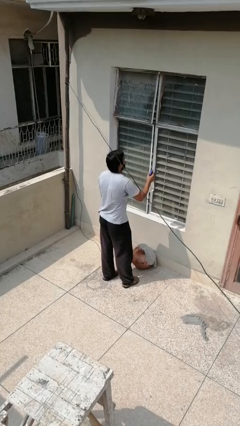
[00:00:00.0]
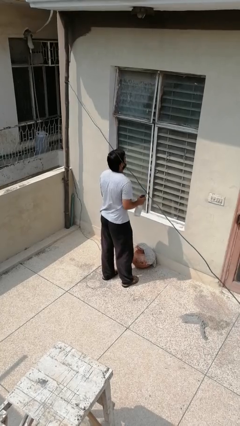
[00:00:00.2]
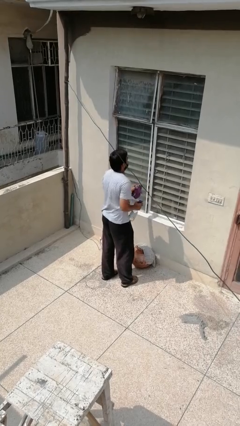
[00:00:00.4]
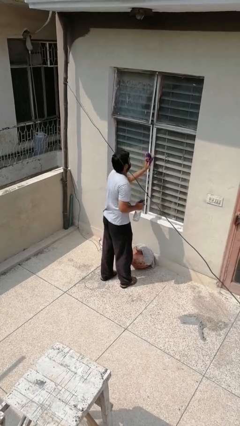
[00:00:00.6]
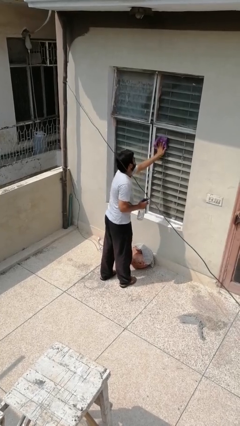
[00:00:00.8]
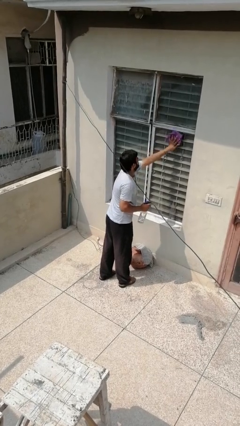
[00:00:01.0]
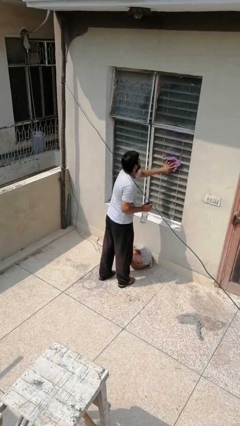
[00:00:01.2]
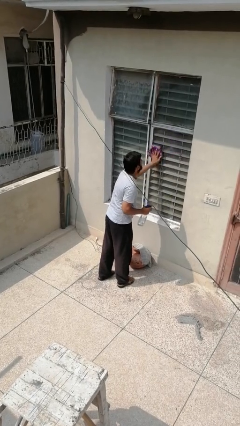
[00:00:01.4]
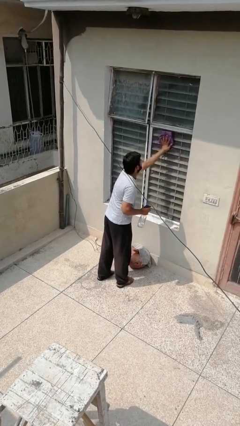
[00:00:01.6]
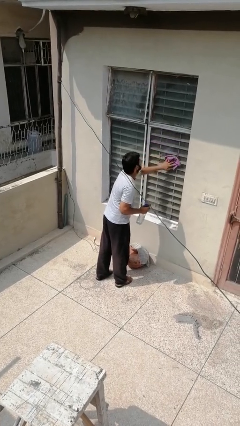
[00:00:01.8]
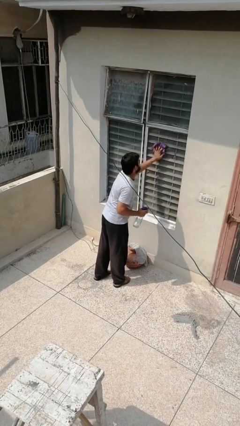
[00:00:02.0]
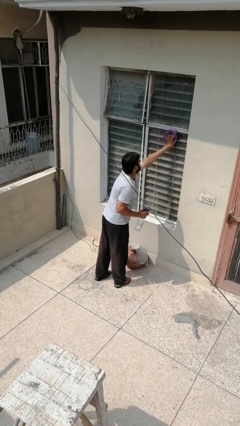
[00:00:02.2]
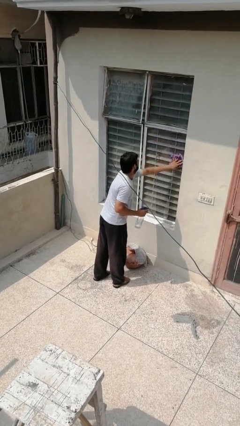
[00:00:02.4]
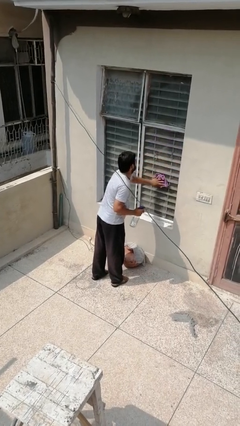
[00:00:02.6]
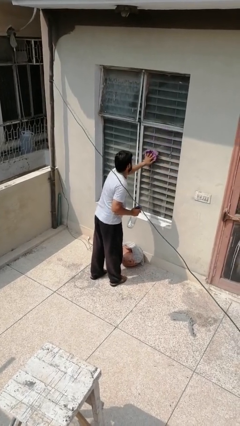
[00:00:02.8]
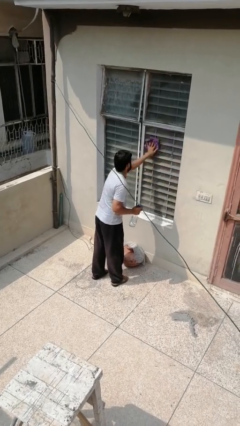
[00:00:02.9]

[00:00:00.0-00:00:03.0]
person washes window

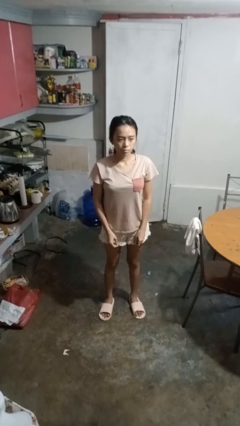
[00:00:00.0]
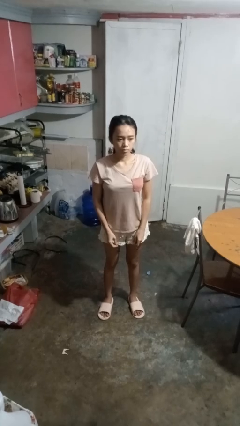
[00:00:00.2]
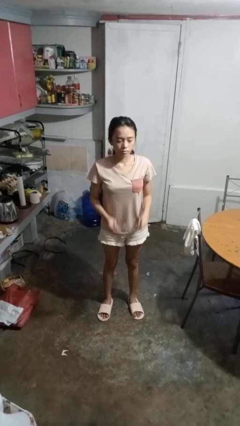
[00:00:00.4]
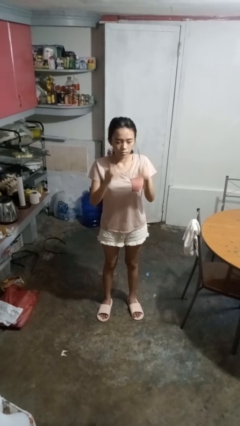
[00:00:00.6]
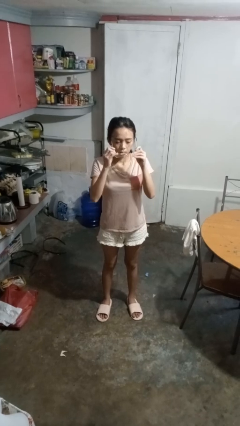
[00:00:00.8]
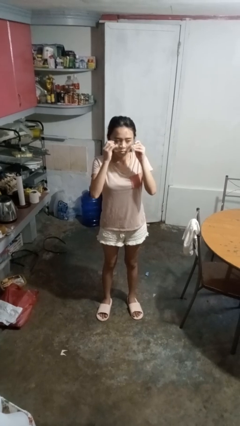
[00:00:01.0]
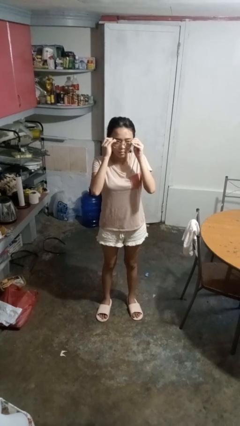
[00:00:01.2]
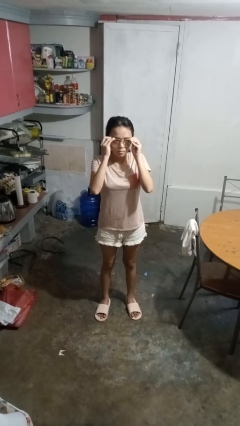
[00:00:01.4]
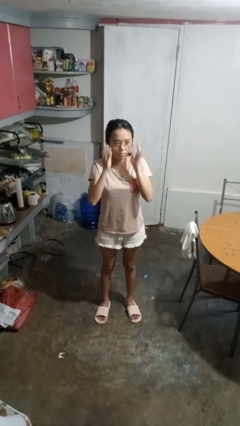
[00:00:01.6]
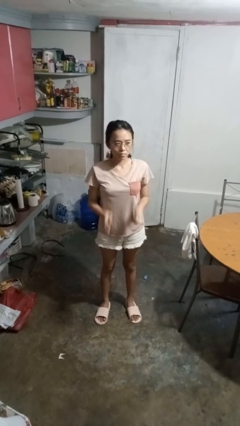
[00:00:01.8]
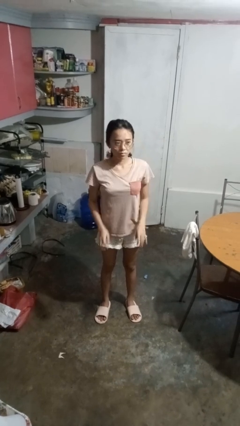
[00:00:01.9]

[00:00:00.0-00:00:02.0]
person puts on glasses

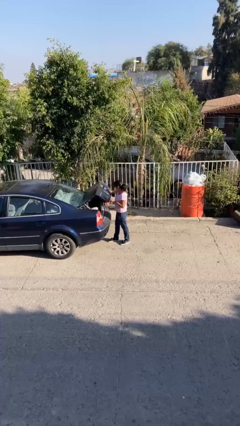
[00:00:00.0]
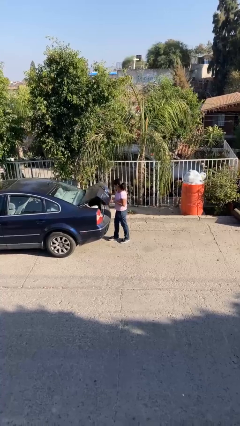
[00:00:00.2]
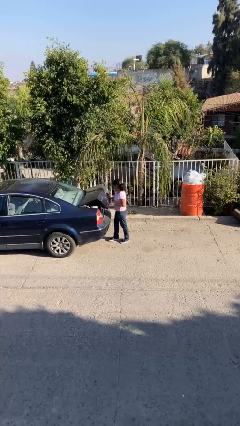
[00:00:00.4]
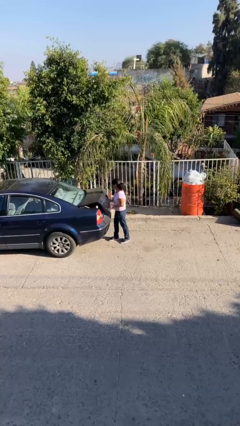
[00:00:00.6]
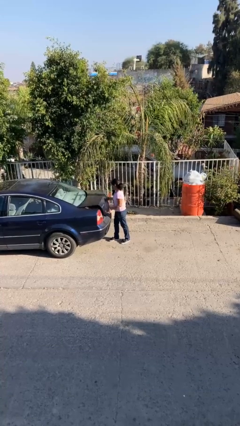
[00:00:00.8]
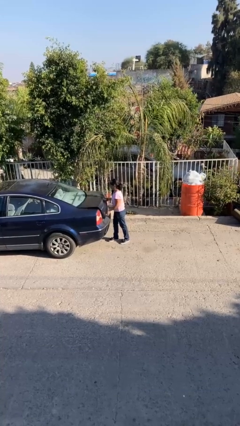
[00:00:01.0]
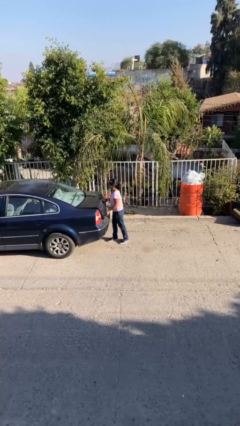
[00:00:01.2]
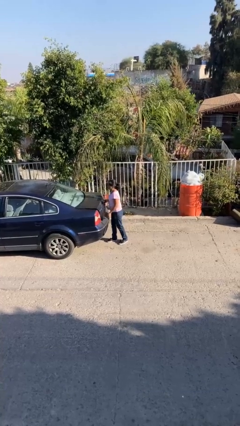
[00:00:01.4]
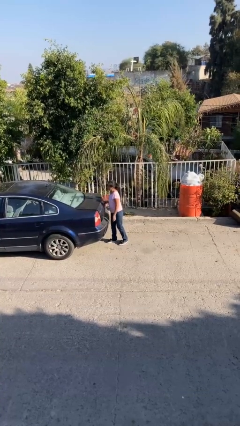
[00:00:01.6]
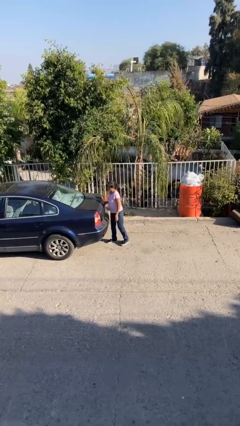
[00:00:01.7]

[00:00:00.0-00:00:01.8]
person closes car trunk

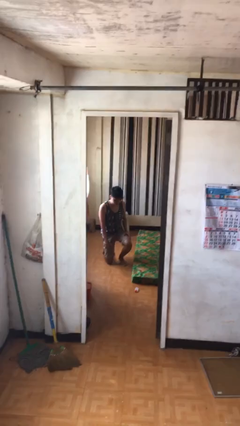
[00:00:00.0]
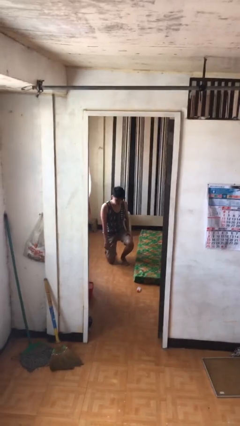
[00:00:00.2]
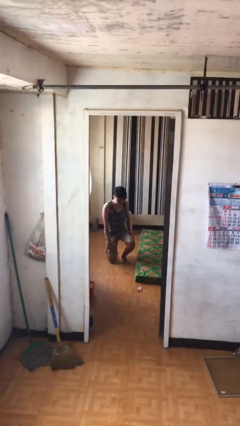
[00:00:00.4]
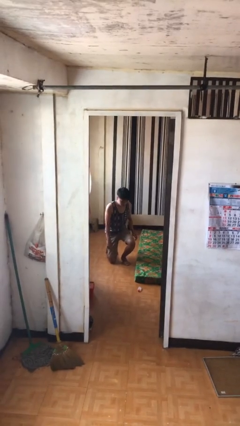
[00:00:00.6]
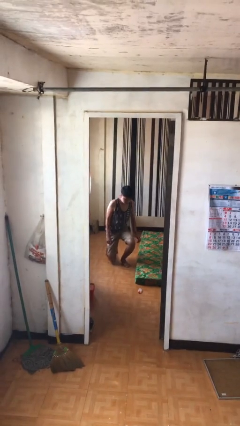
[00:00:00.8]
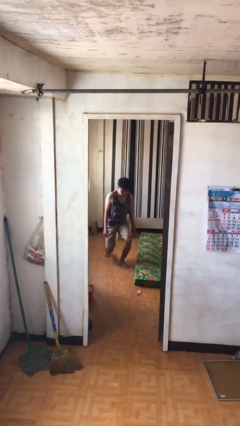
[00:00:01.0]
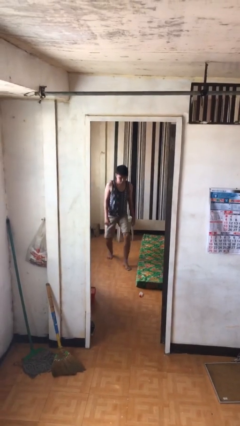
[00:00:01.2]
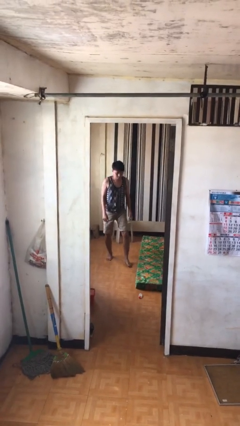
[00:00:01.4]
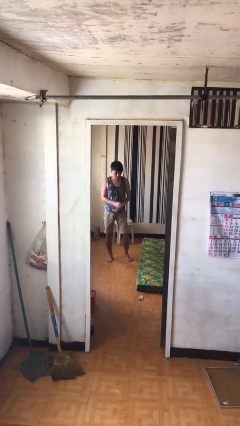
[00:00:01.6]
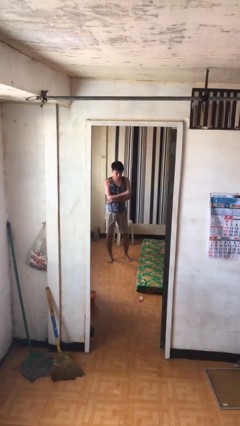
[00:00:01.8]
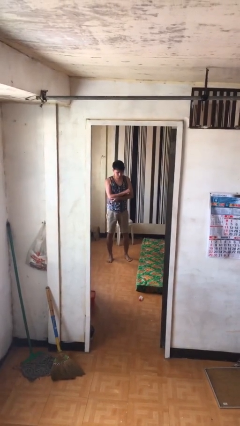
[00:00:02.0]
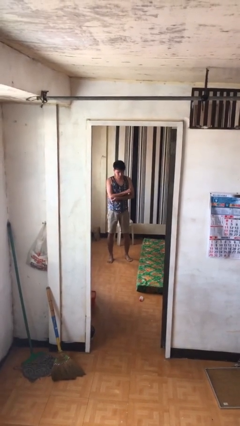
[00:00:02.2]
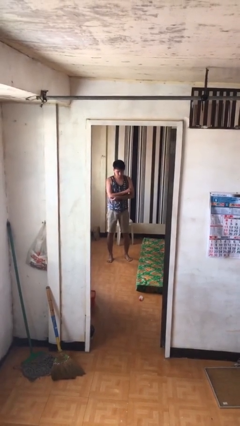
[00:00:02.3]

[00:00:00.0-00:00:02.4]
person stands up from floor

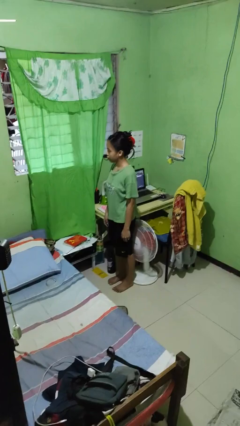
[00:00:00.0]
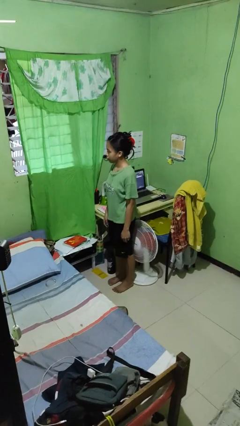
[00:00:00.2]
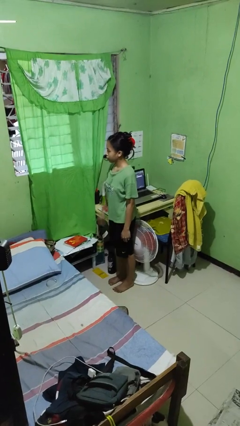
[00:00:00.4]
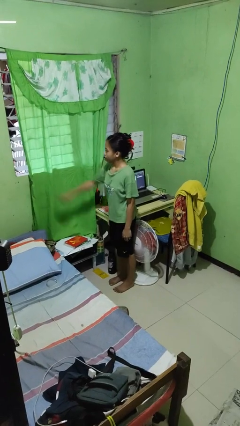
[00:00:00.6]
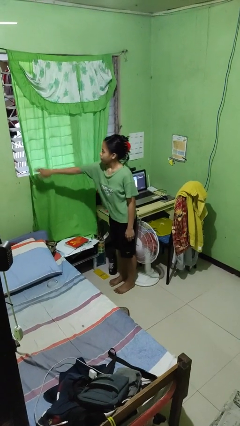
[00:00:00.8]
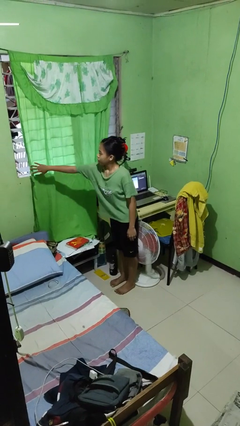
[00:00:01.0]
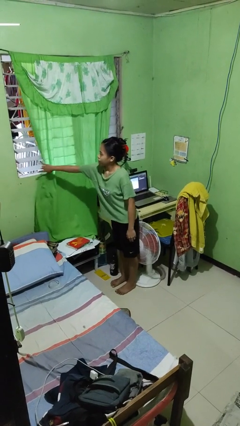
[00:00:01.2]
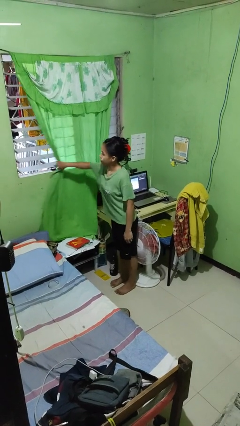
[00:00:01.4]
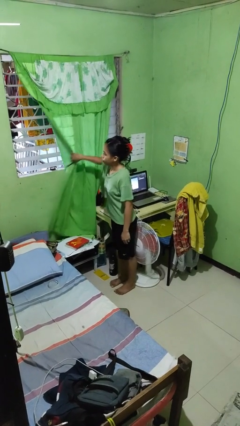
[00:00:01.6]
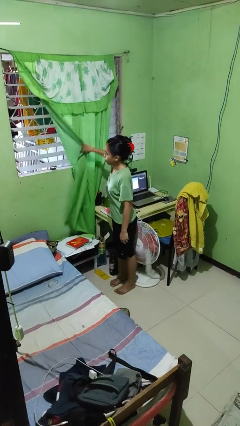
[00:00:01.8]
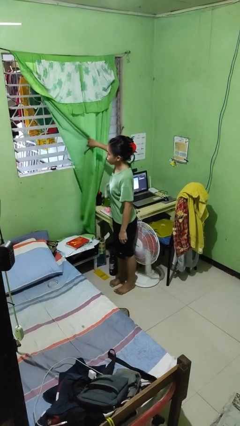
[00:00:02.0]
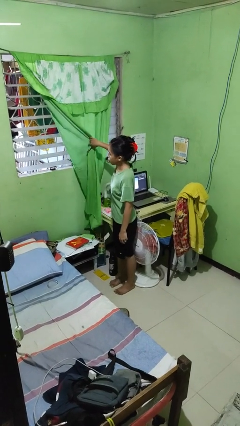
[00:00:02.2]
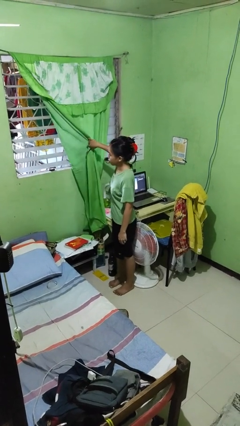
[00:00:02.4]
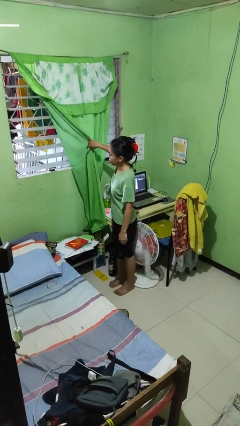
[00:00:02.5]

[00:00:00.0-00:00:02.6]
person opens curtains

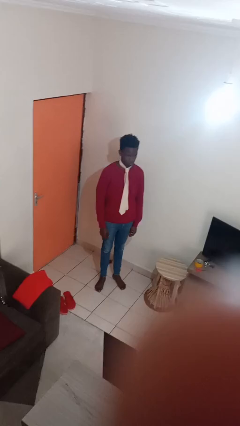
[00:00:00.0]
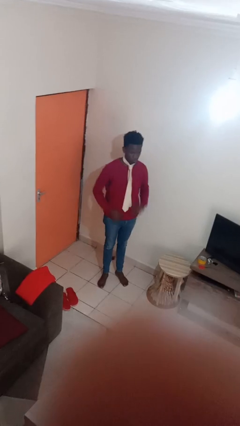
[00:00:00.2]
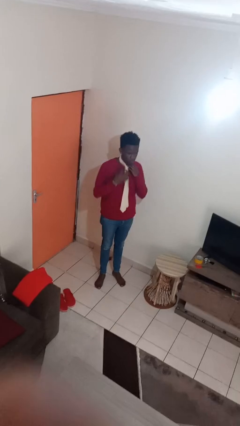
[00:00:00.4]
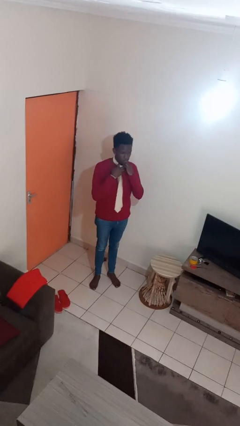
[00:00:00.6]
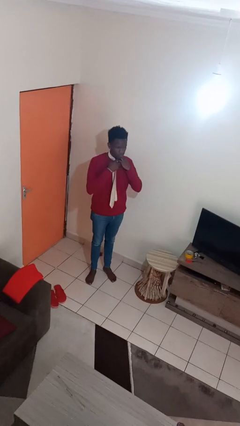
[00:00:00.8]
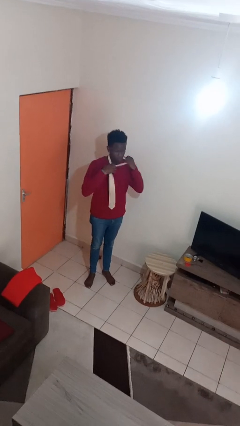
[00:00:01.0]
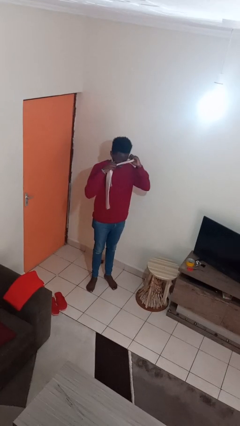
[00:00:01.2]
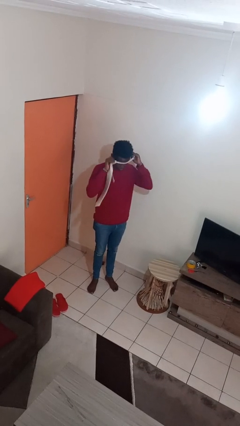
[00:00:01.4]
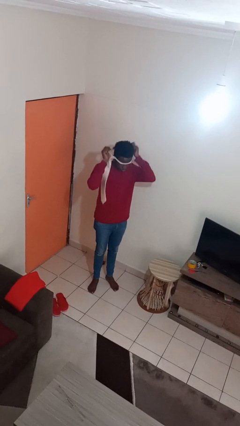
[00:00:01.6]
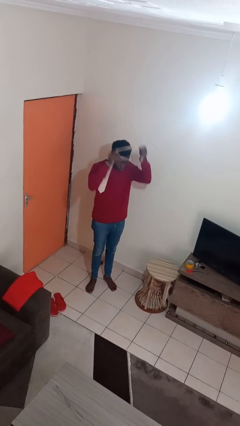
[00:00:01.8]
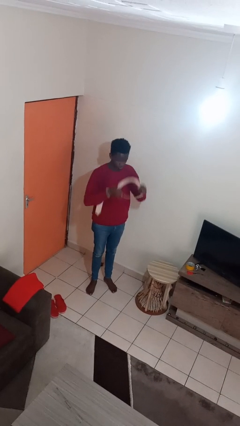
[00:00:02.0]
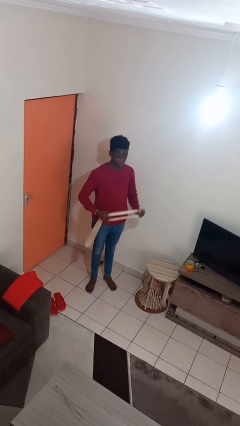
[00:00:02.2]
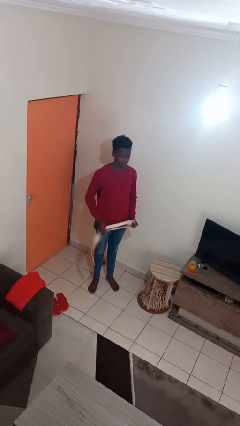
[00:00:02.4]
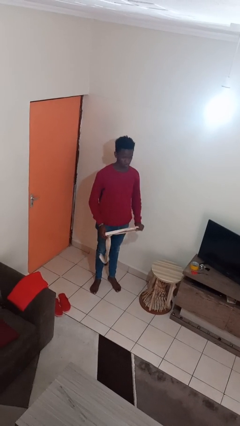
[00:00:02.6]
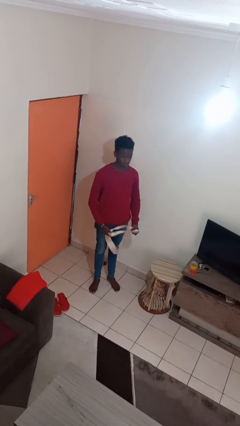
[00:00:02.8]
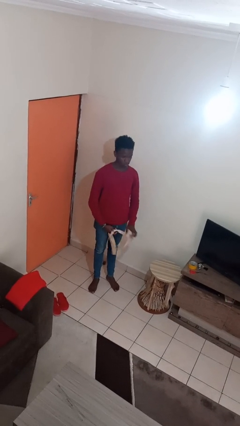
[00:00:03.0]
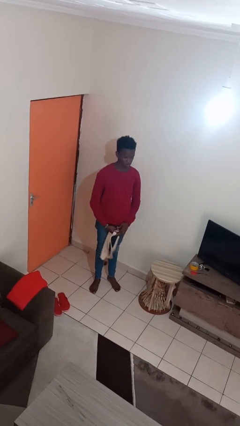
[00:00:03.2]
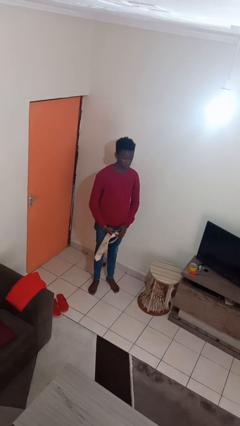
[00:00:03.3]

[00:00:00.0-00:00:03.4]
person takes off necktie

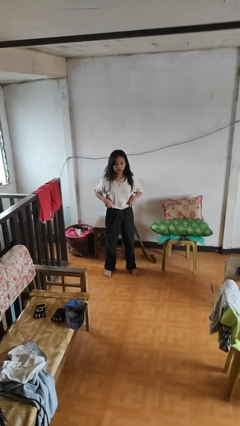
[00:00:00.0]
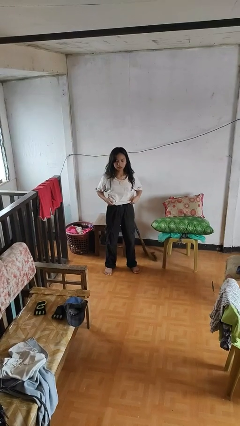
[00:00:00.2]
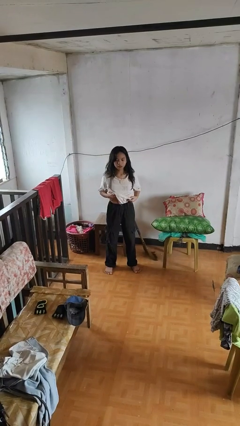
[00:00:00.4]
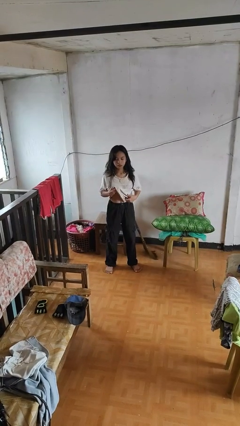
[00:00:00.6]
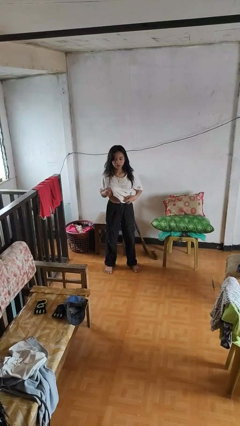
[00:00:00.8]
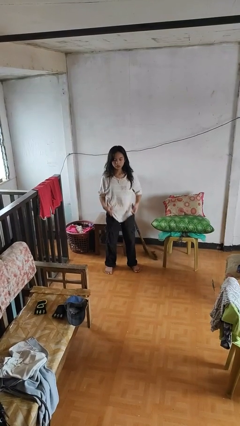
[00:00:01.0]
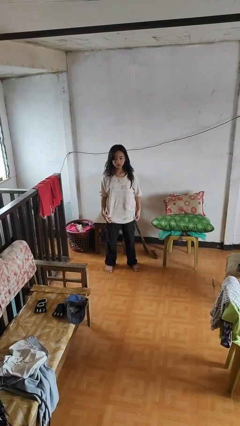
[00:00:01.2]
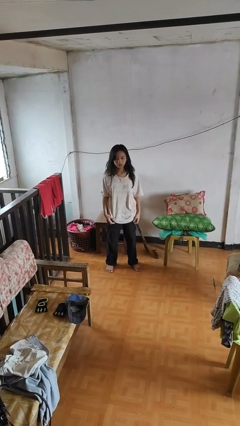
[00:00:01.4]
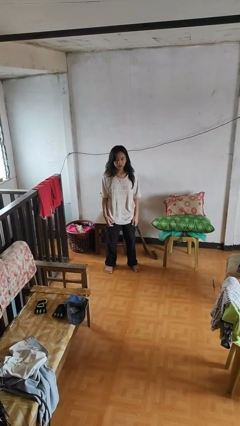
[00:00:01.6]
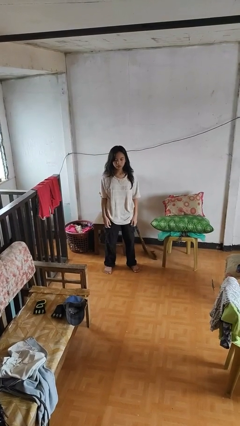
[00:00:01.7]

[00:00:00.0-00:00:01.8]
person untucks shirt
